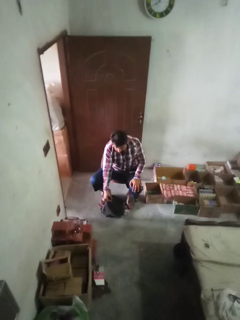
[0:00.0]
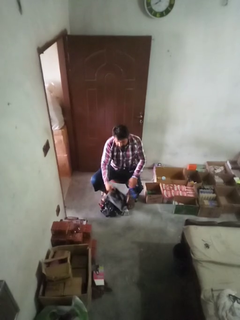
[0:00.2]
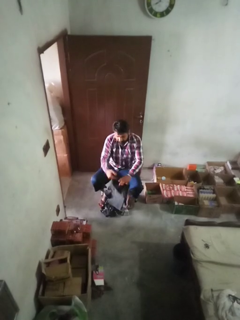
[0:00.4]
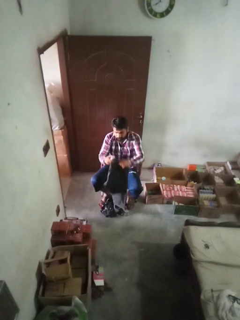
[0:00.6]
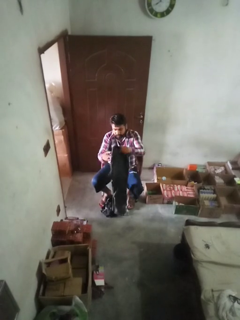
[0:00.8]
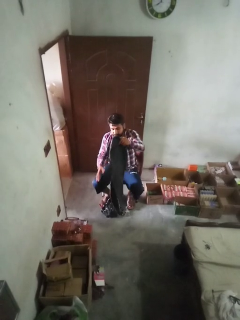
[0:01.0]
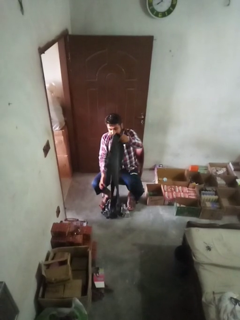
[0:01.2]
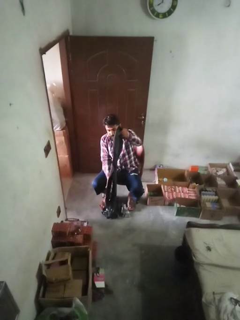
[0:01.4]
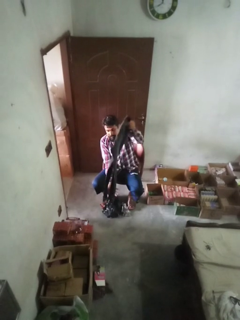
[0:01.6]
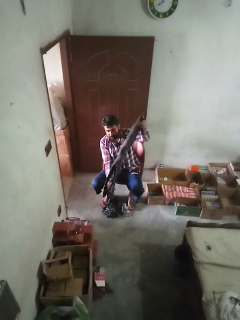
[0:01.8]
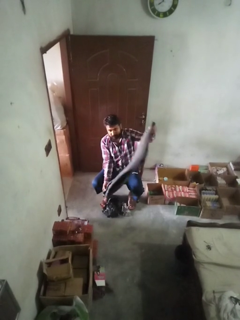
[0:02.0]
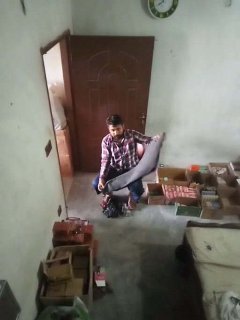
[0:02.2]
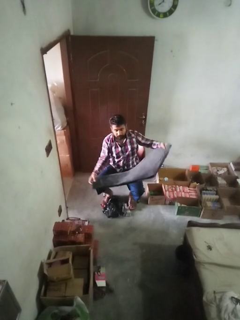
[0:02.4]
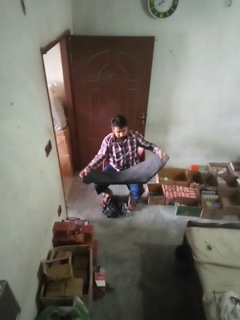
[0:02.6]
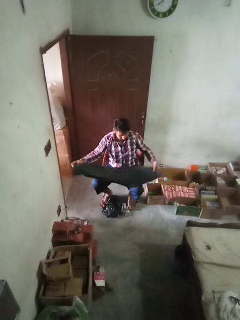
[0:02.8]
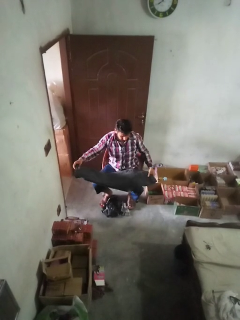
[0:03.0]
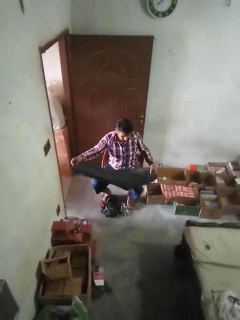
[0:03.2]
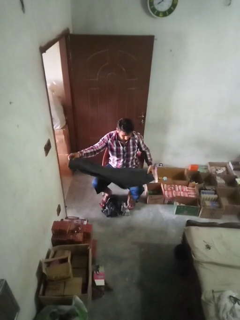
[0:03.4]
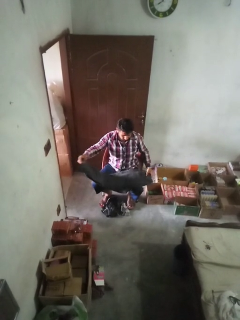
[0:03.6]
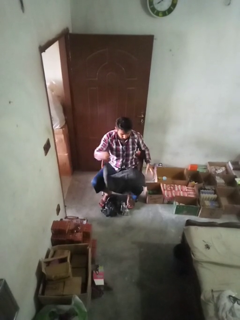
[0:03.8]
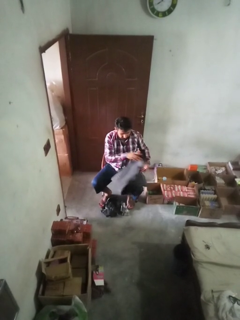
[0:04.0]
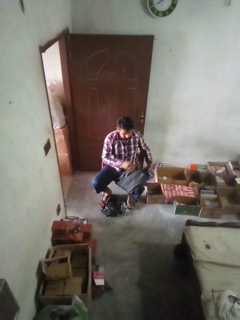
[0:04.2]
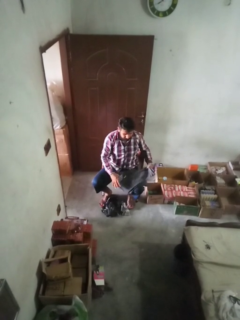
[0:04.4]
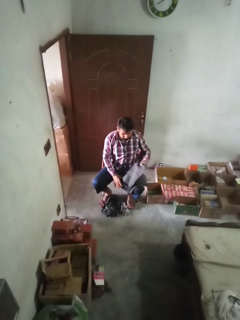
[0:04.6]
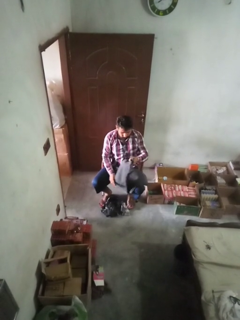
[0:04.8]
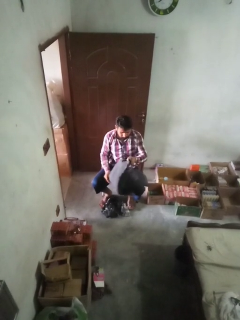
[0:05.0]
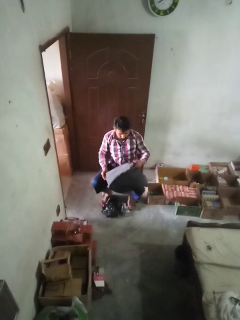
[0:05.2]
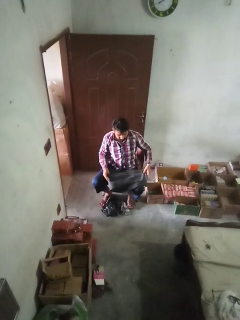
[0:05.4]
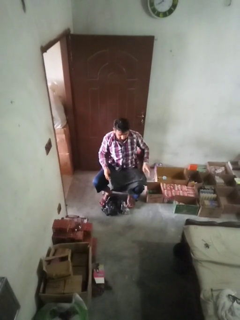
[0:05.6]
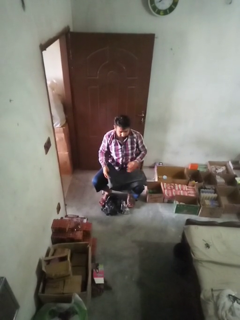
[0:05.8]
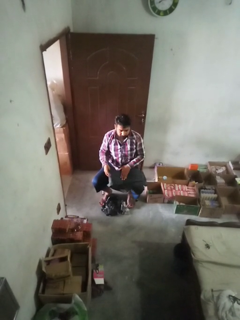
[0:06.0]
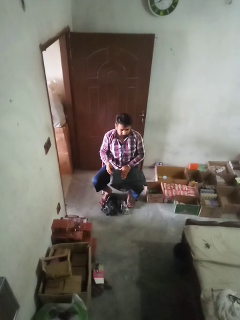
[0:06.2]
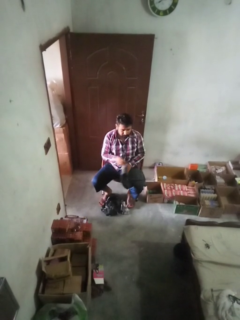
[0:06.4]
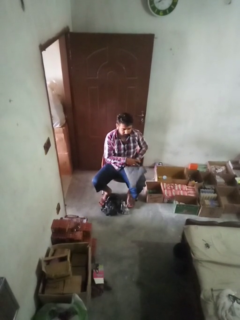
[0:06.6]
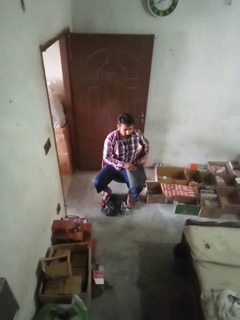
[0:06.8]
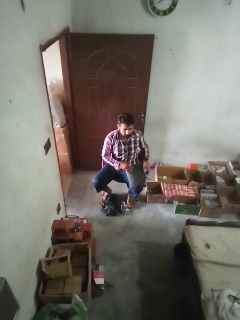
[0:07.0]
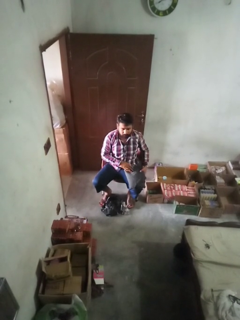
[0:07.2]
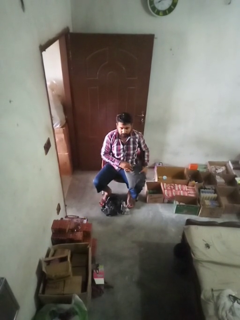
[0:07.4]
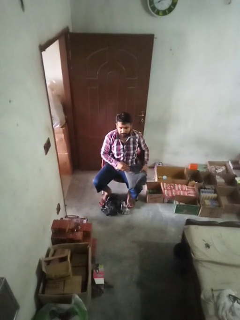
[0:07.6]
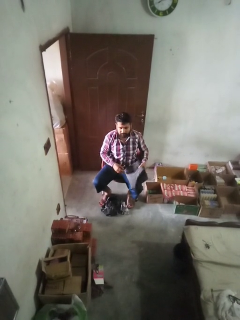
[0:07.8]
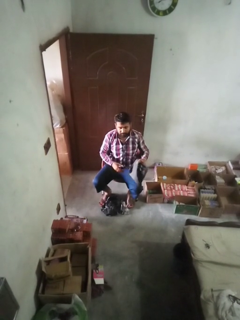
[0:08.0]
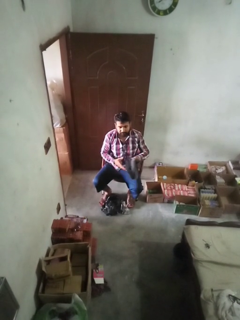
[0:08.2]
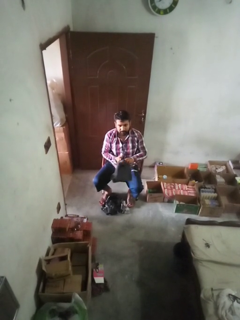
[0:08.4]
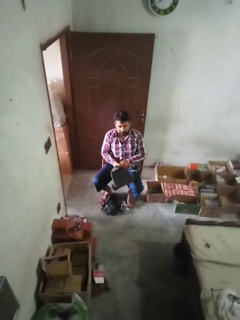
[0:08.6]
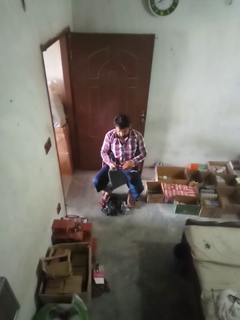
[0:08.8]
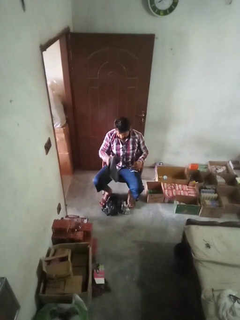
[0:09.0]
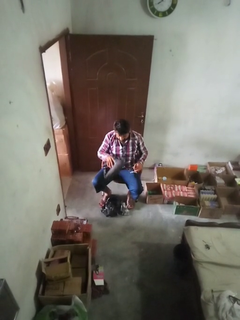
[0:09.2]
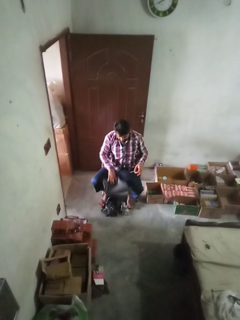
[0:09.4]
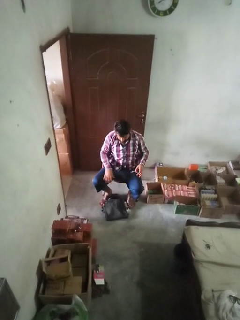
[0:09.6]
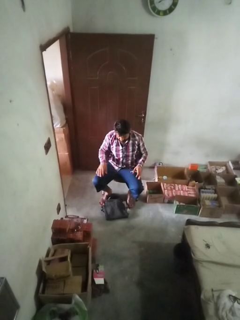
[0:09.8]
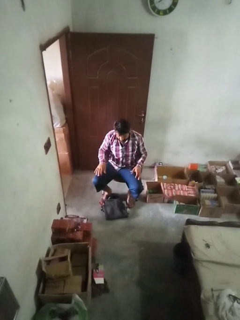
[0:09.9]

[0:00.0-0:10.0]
person folds pants

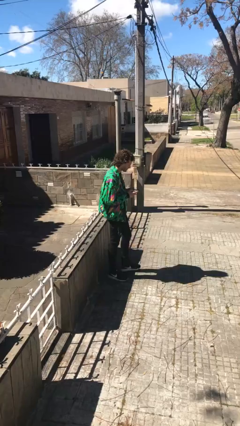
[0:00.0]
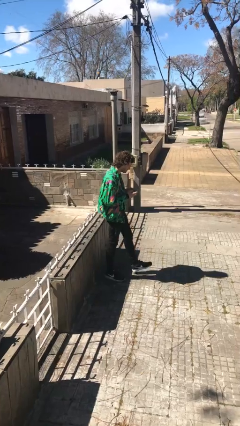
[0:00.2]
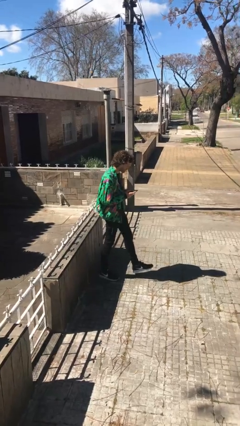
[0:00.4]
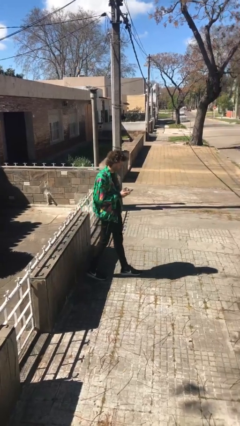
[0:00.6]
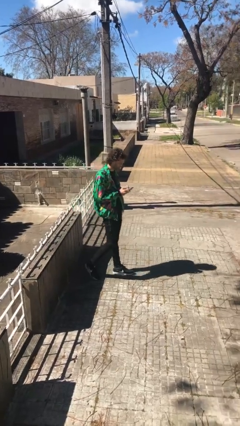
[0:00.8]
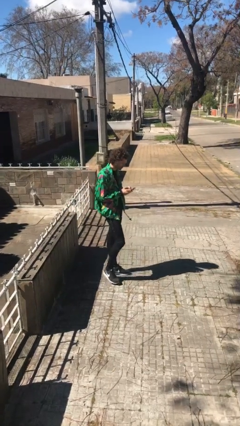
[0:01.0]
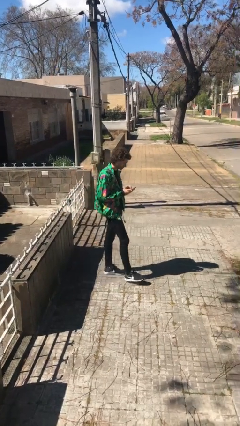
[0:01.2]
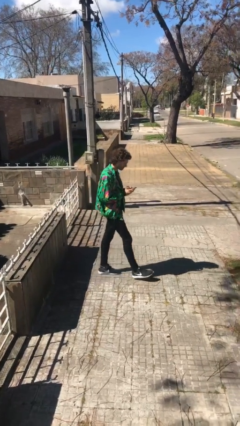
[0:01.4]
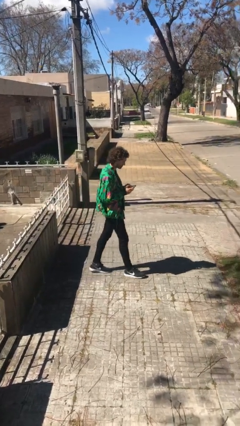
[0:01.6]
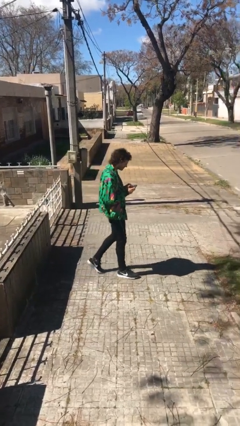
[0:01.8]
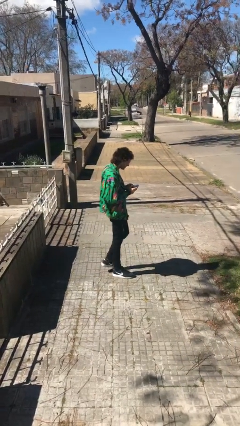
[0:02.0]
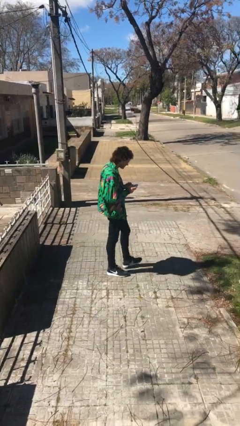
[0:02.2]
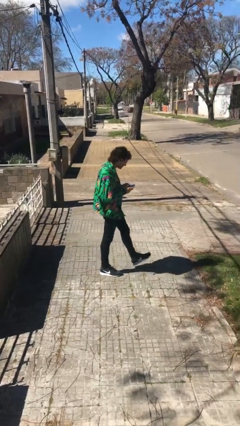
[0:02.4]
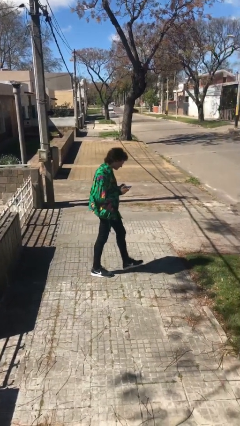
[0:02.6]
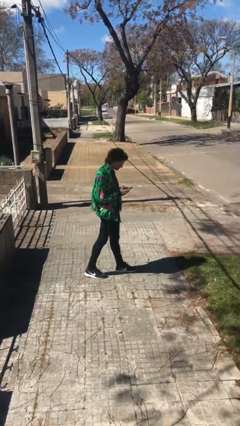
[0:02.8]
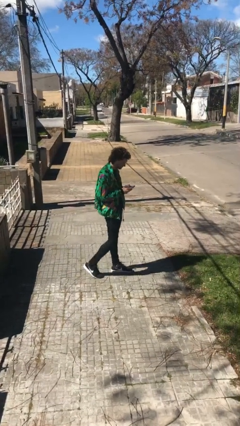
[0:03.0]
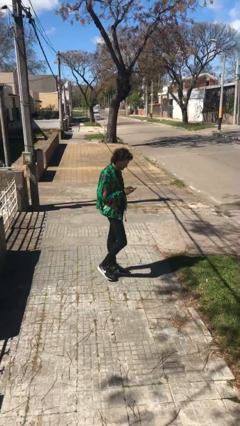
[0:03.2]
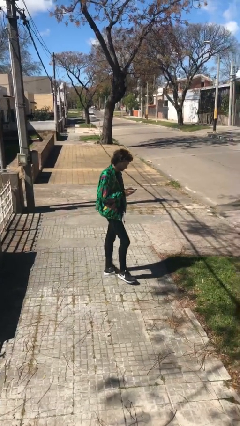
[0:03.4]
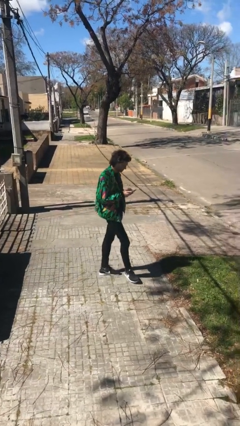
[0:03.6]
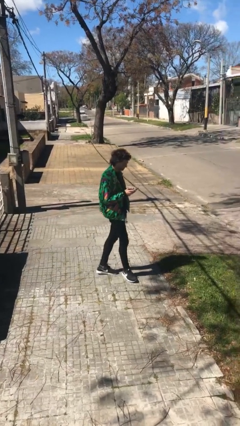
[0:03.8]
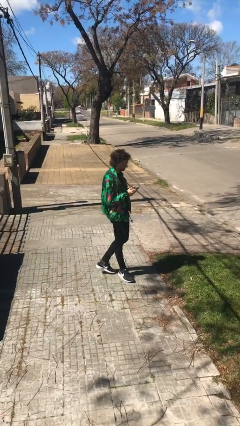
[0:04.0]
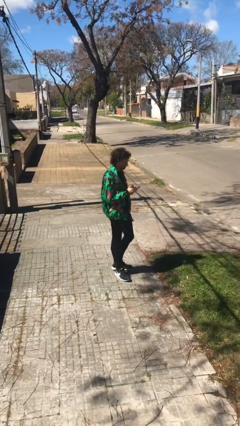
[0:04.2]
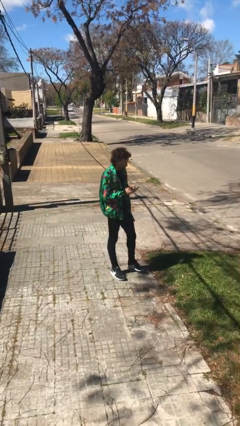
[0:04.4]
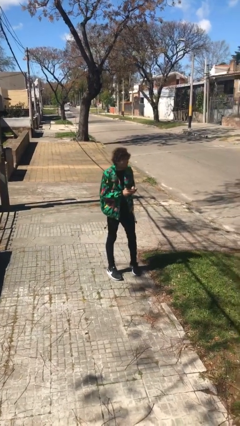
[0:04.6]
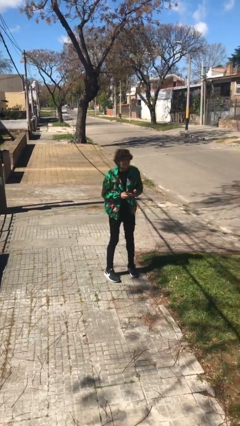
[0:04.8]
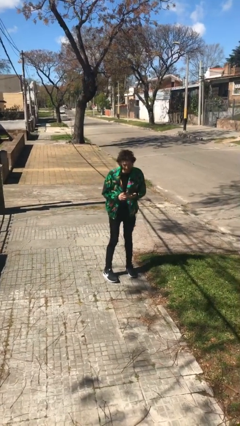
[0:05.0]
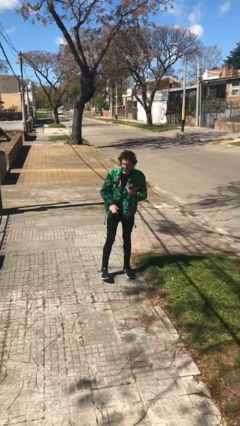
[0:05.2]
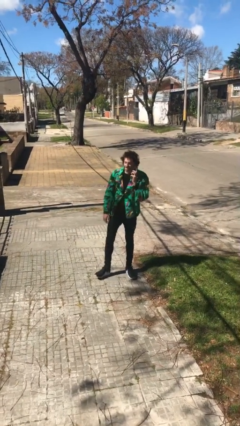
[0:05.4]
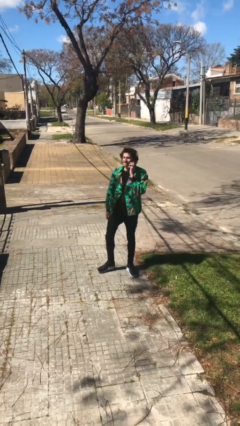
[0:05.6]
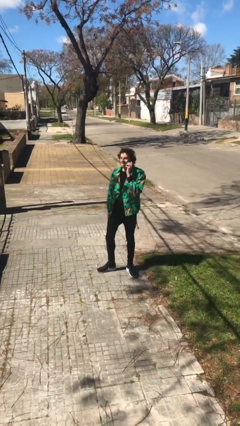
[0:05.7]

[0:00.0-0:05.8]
person texts on phone

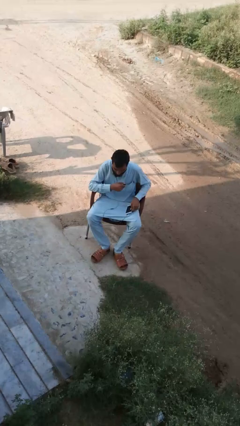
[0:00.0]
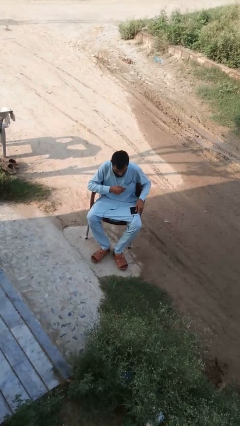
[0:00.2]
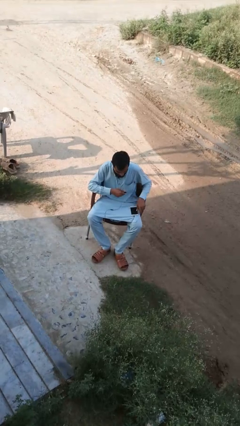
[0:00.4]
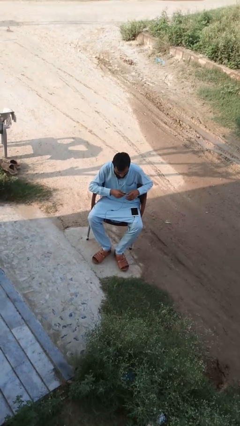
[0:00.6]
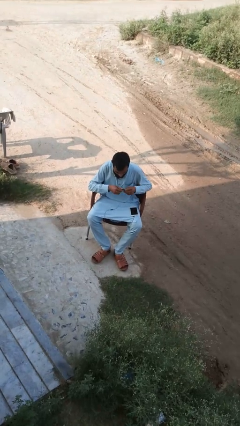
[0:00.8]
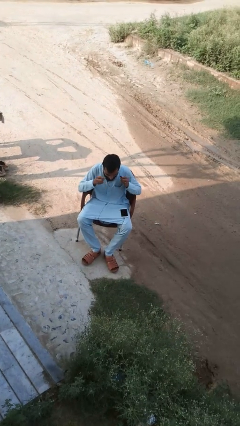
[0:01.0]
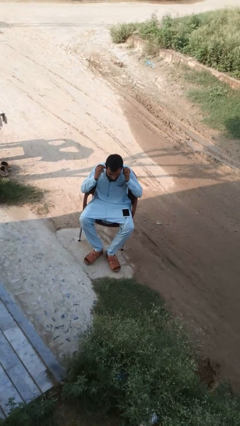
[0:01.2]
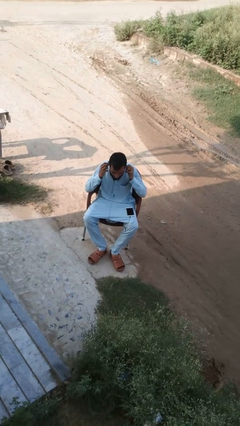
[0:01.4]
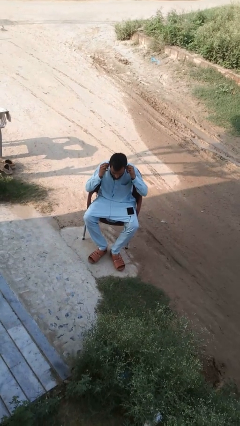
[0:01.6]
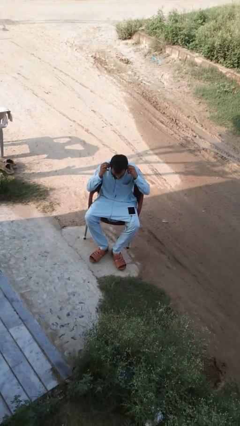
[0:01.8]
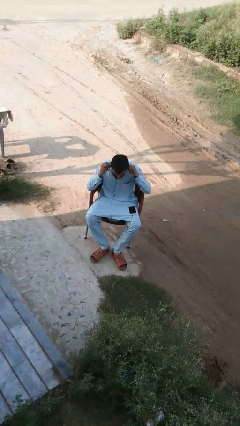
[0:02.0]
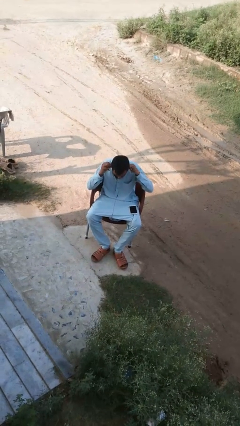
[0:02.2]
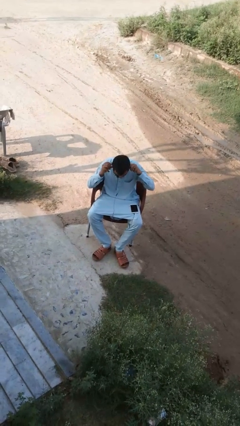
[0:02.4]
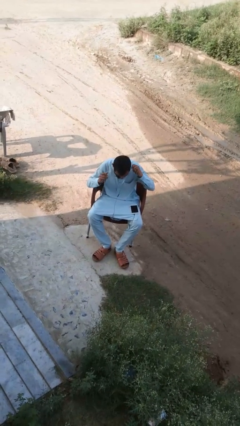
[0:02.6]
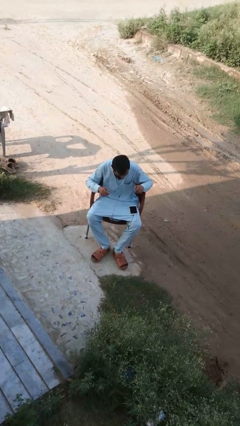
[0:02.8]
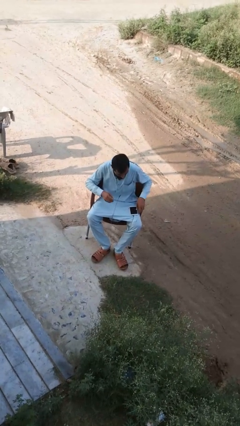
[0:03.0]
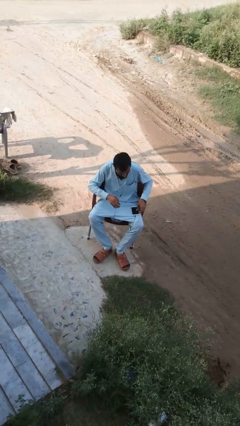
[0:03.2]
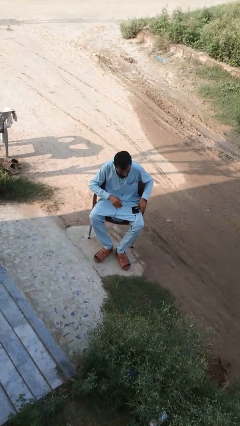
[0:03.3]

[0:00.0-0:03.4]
person puts on headphones

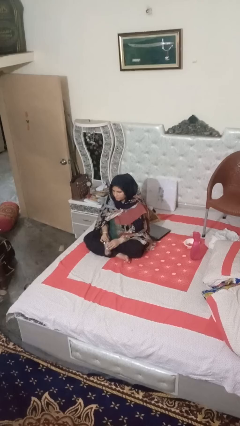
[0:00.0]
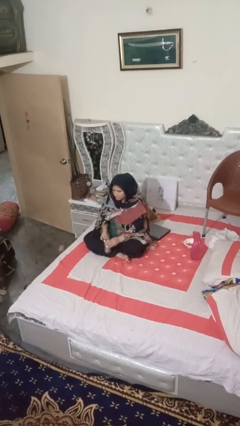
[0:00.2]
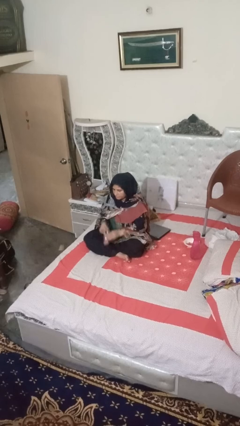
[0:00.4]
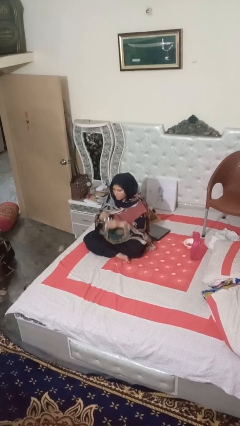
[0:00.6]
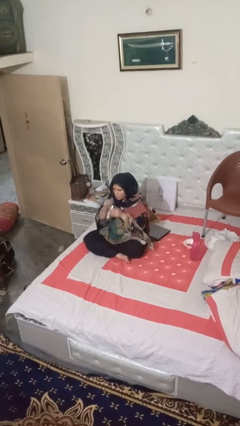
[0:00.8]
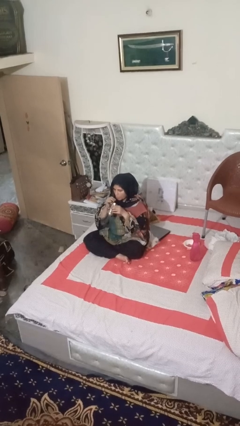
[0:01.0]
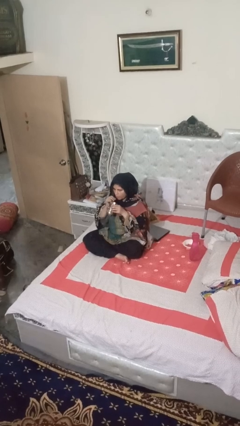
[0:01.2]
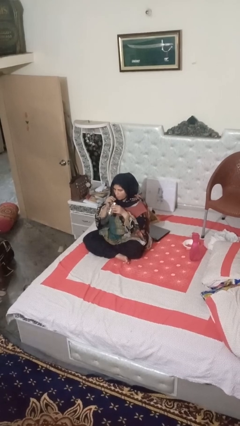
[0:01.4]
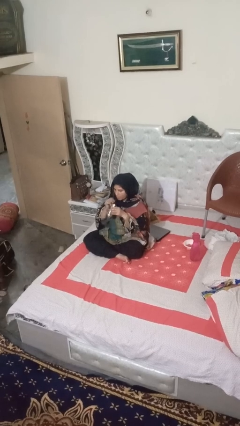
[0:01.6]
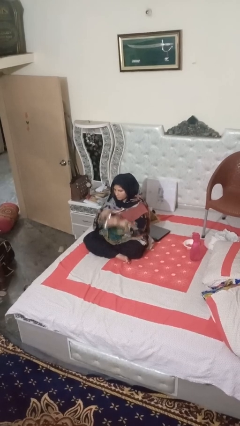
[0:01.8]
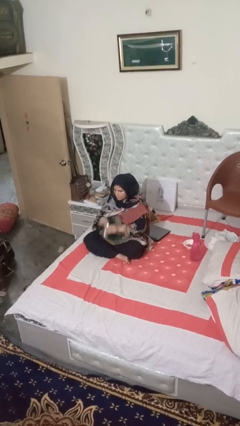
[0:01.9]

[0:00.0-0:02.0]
person drinks from straw
